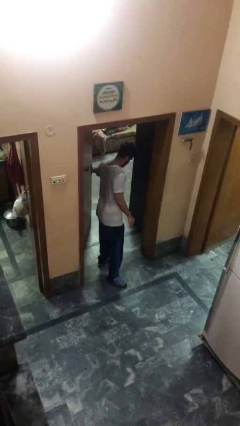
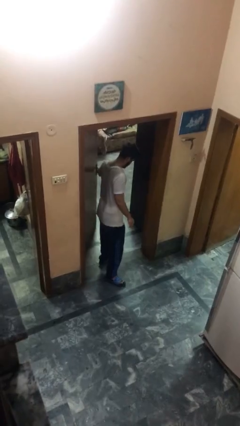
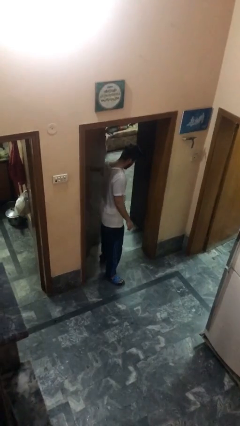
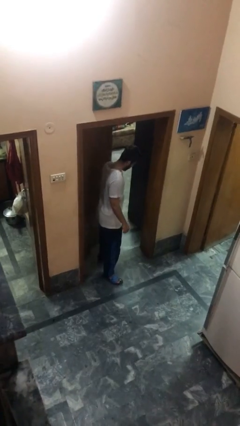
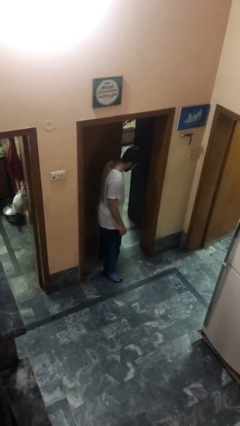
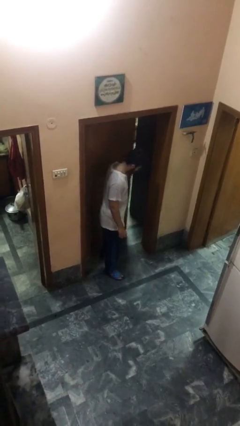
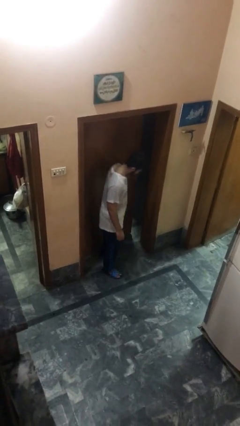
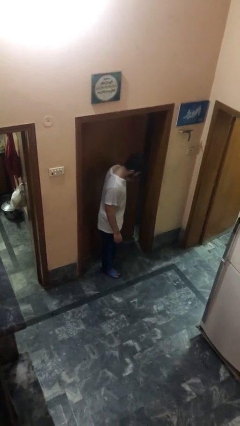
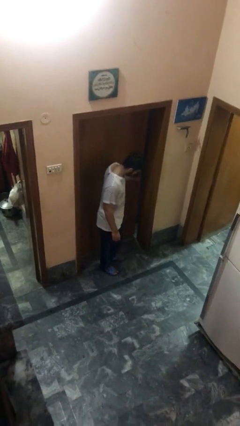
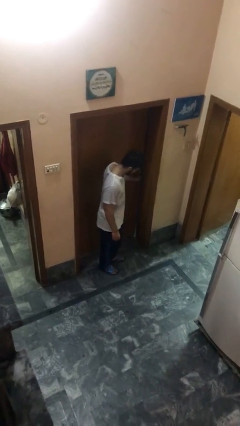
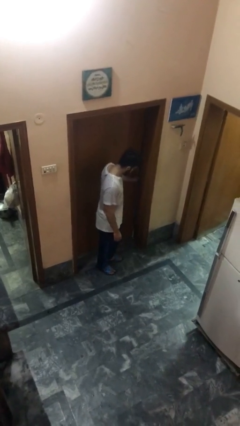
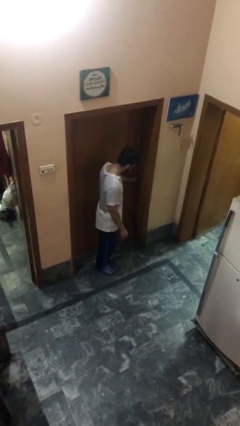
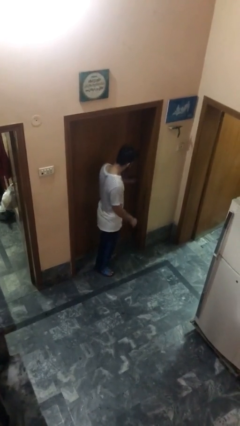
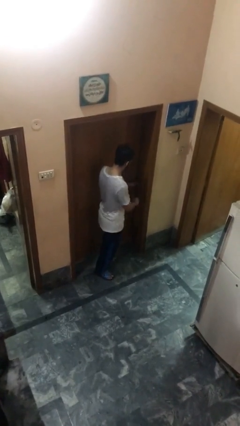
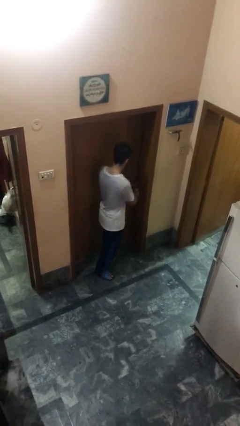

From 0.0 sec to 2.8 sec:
person closes facility door

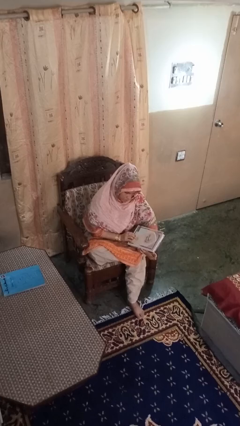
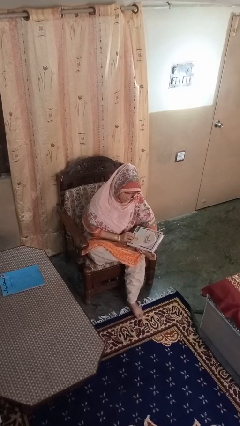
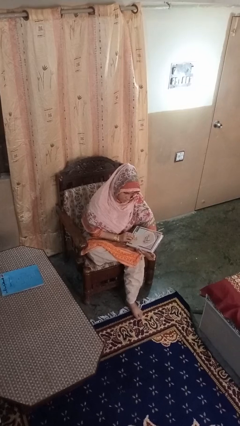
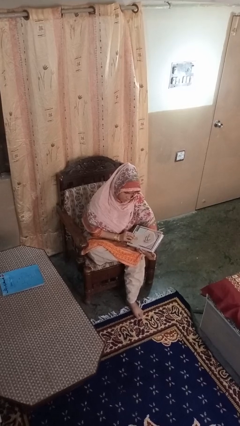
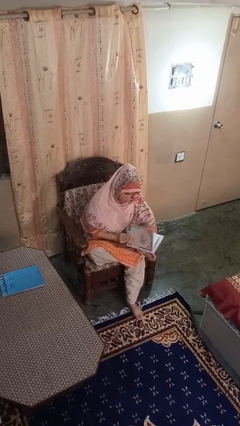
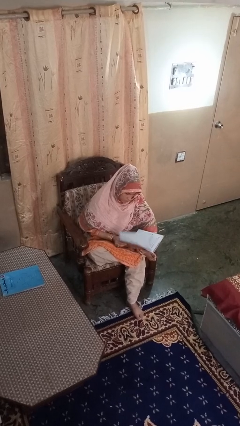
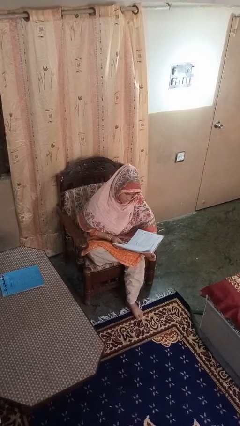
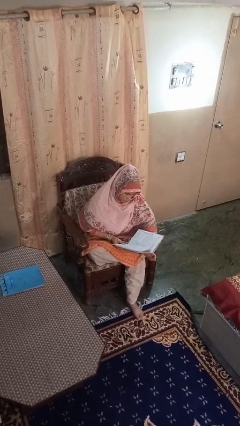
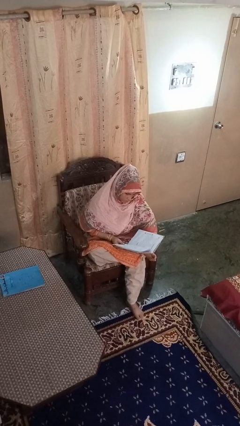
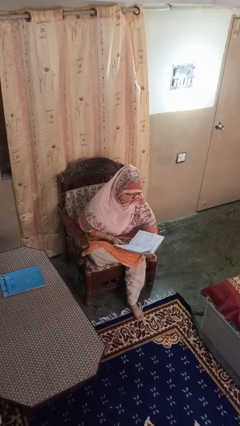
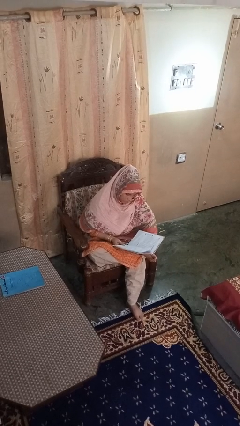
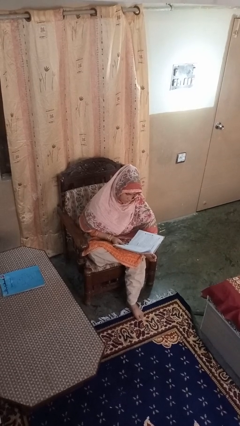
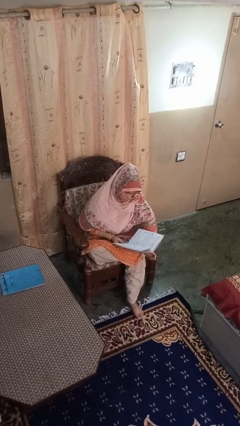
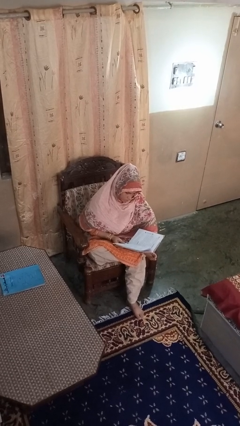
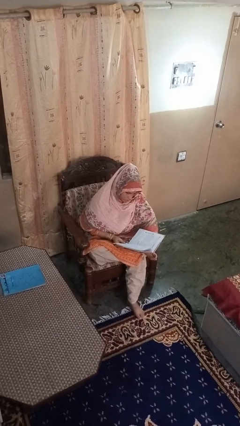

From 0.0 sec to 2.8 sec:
person reads book

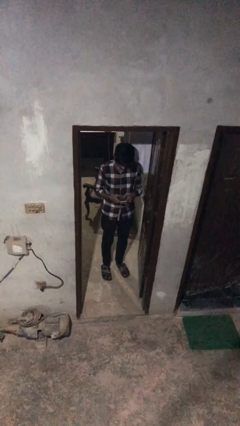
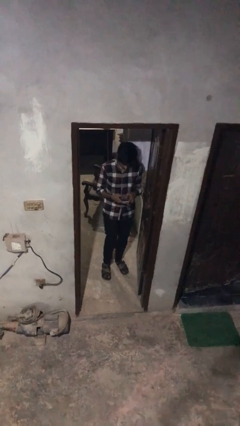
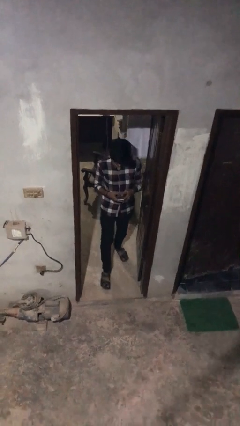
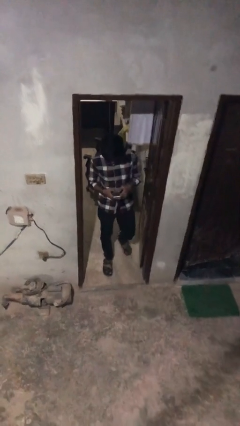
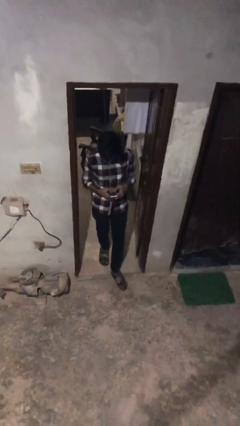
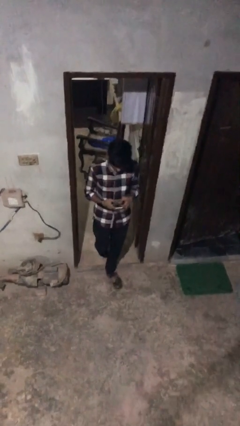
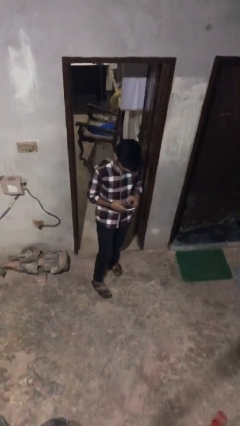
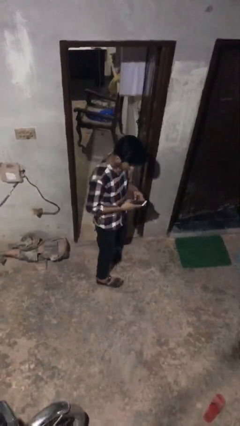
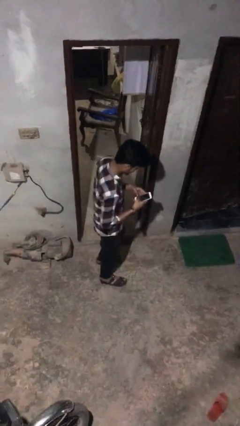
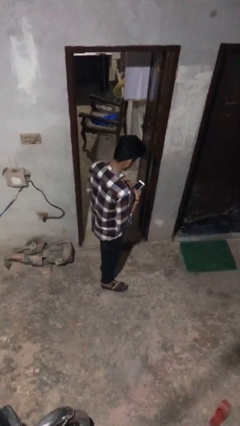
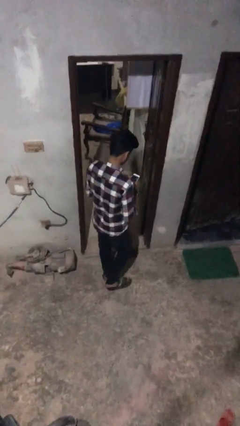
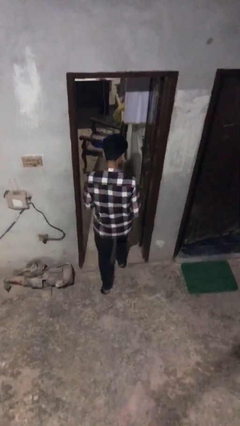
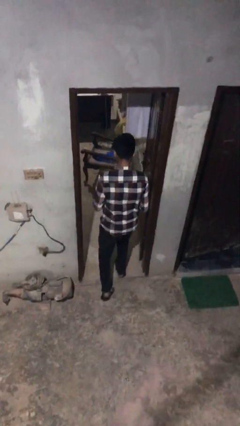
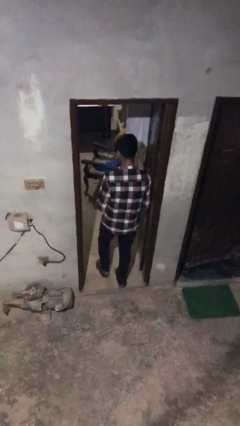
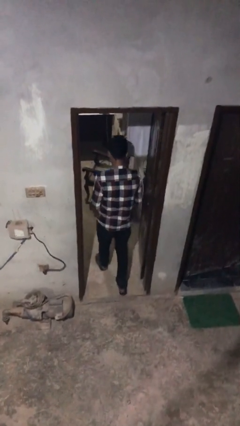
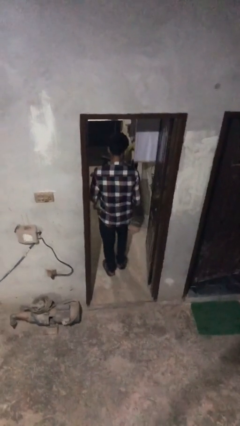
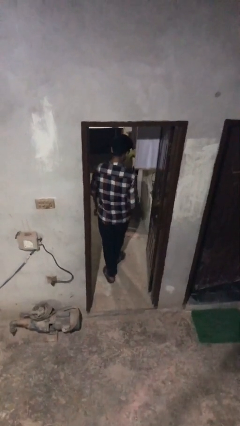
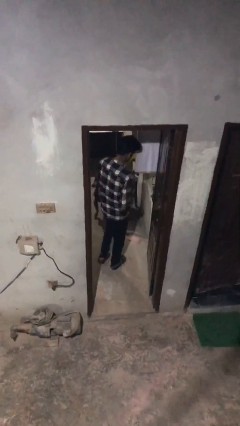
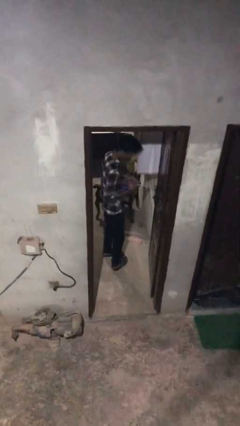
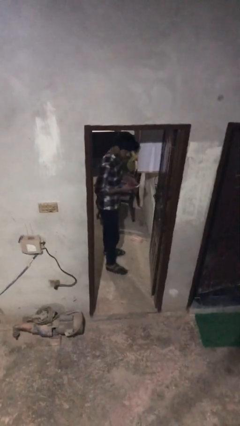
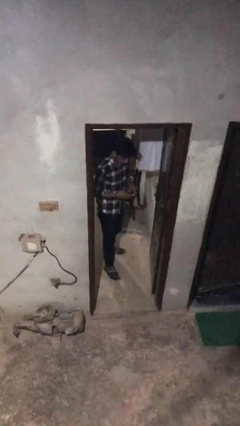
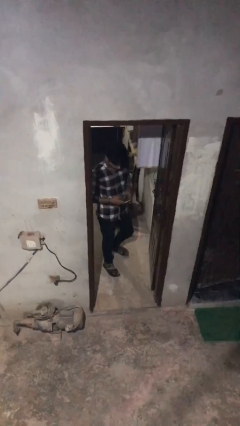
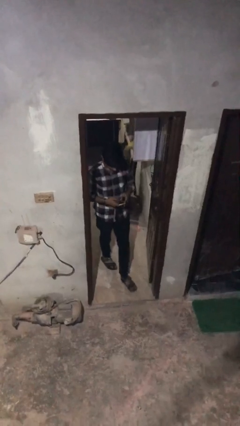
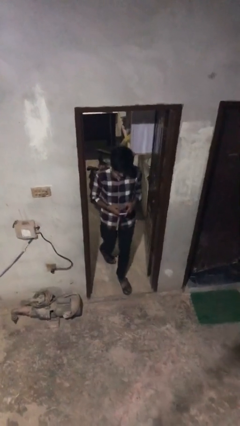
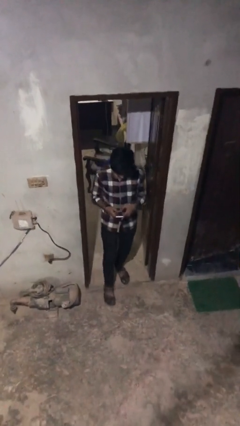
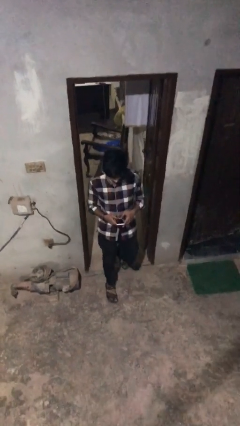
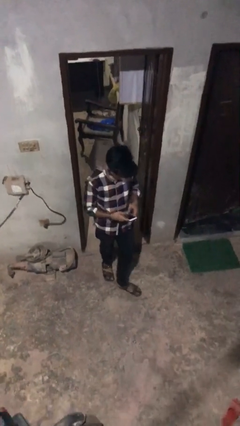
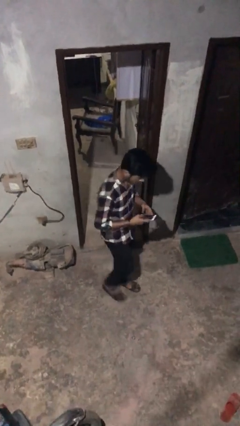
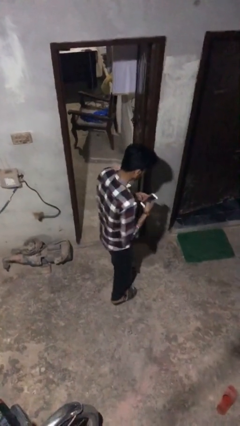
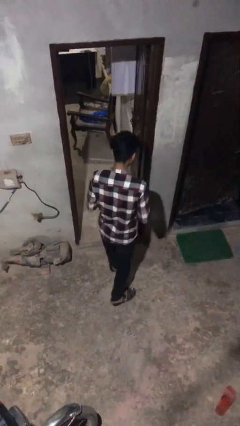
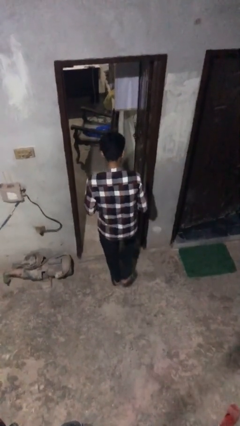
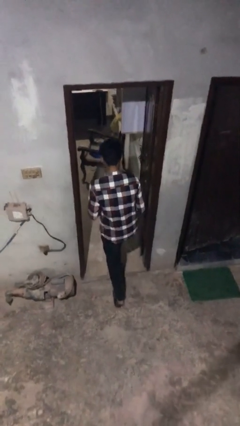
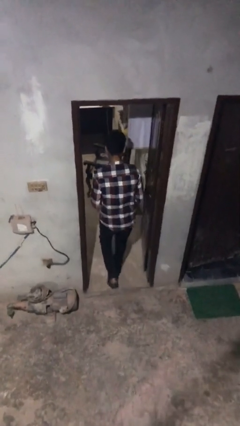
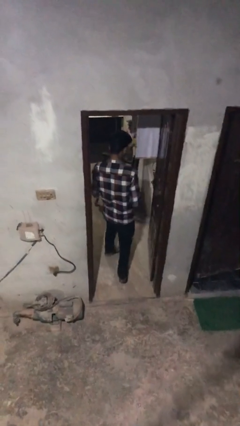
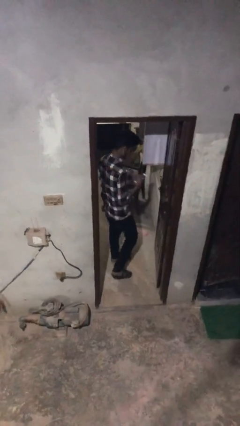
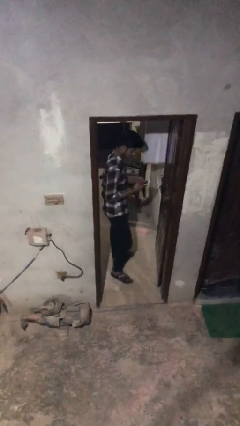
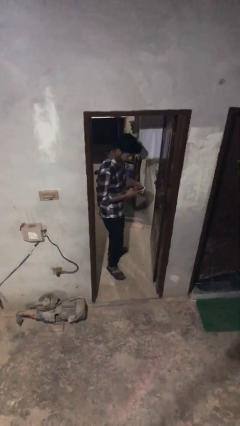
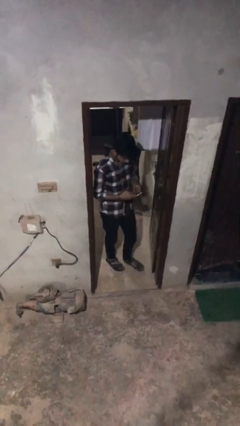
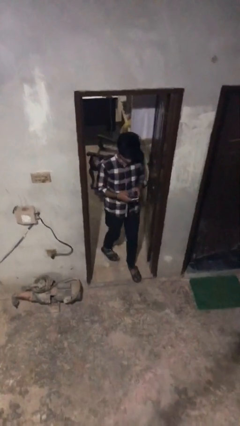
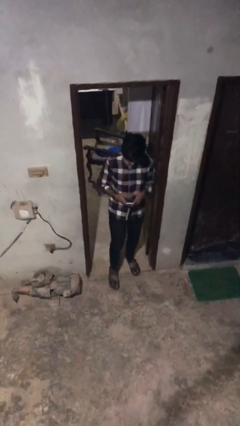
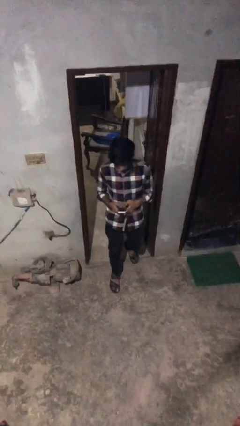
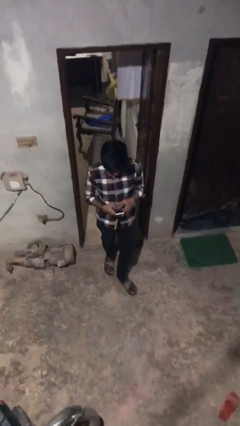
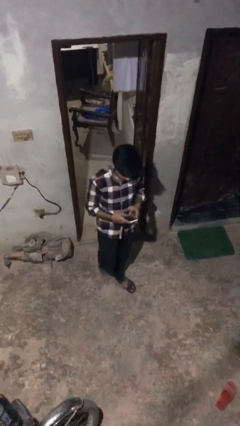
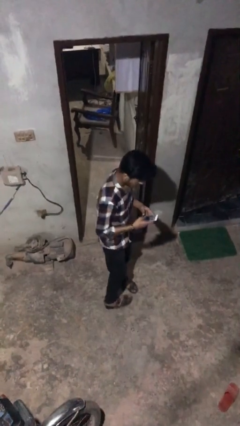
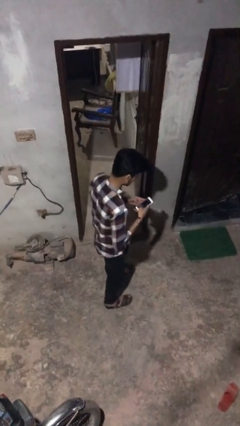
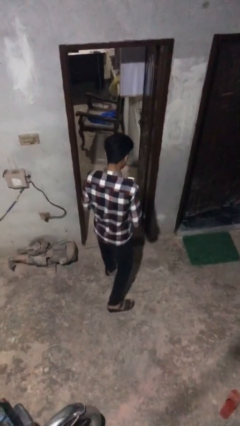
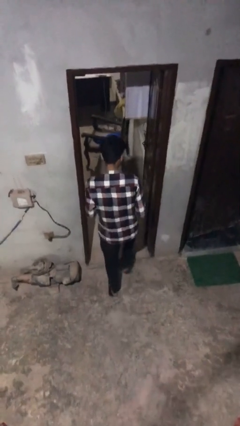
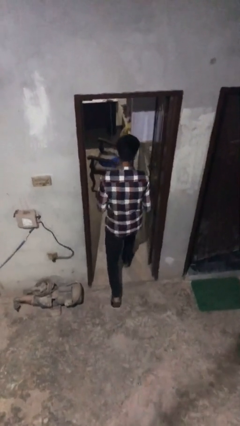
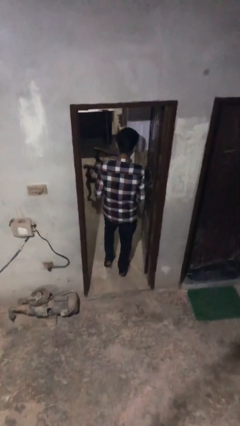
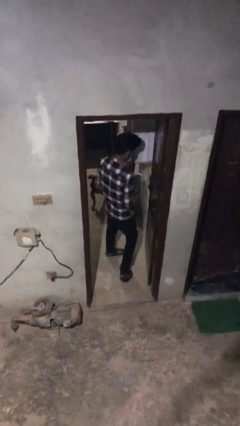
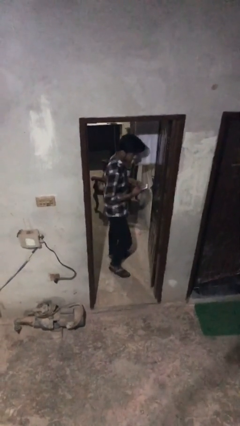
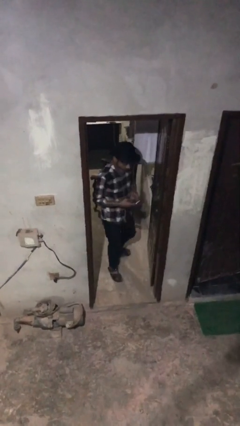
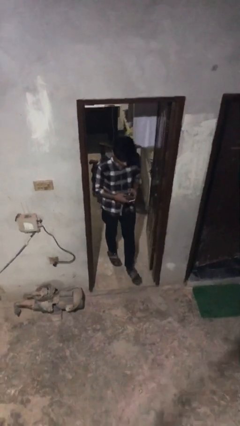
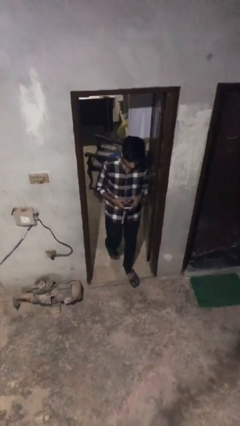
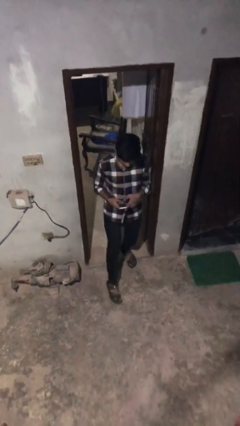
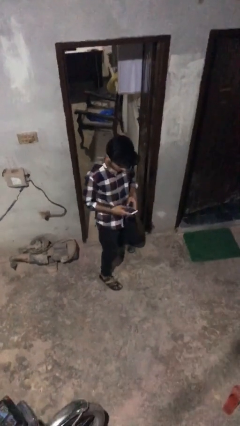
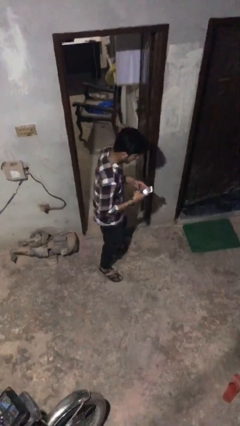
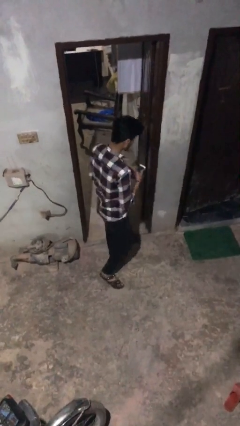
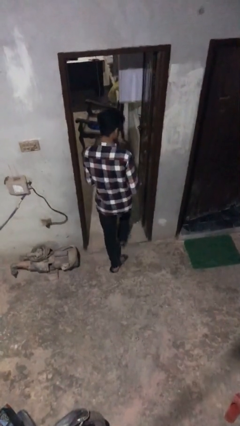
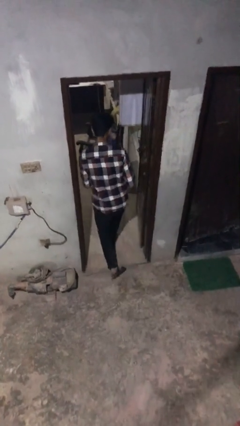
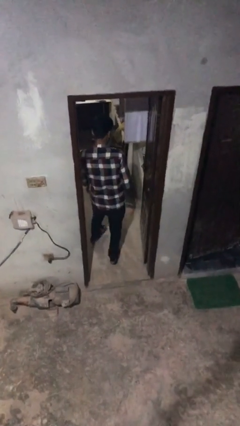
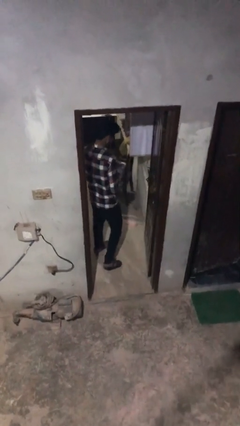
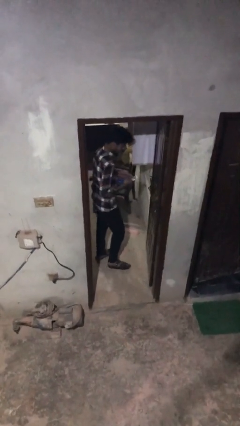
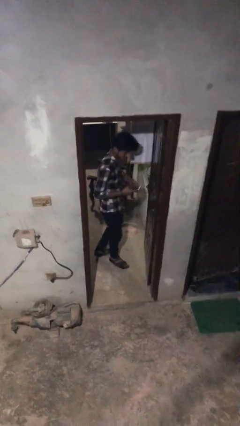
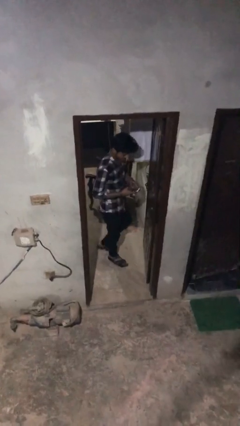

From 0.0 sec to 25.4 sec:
person texts on phone
